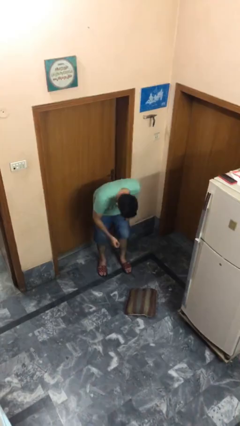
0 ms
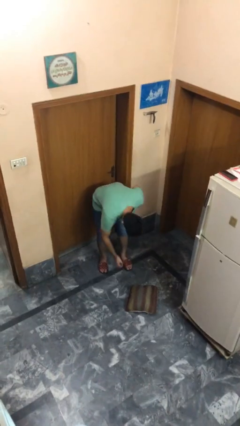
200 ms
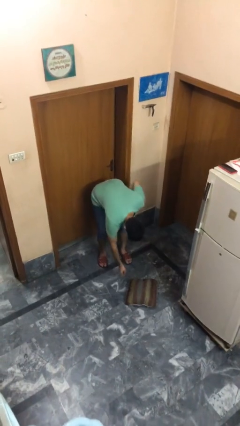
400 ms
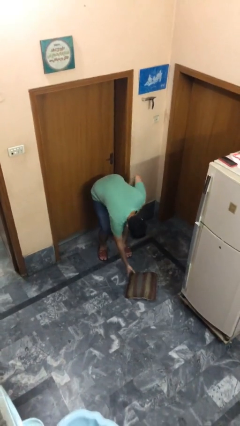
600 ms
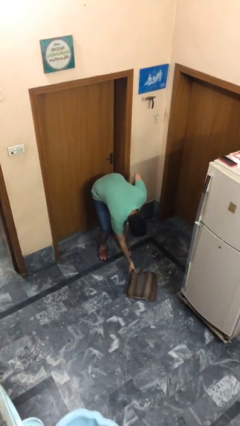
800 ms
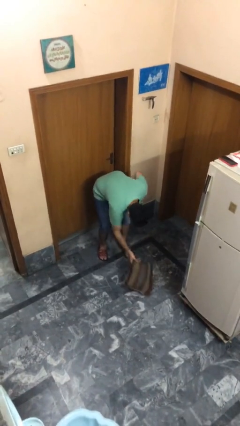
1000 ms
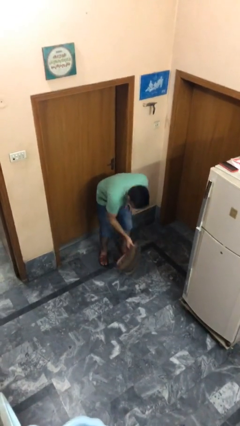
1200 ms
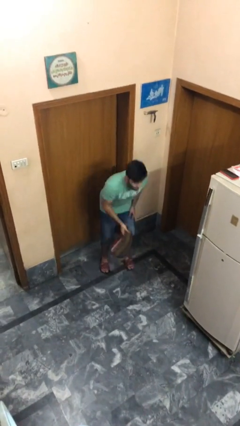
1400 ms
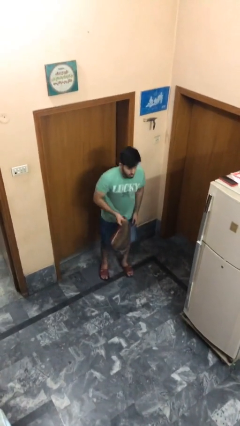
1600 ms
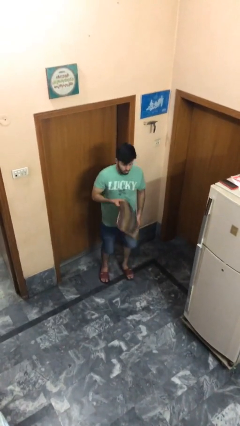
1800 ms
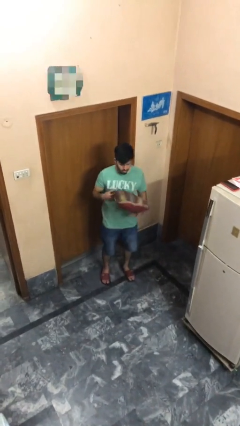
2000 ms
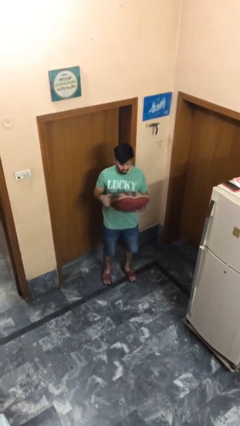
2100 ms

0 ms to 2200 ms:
person picks up object from floor

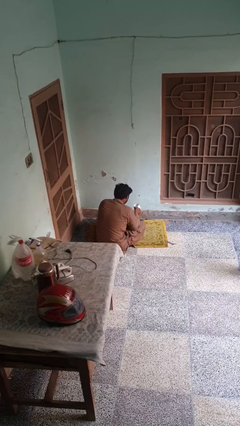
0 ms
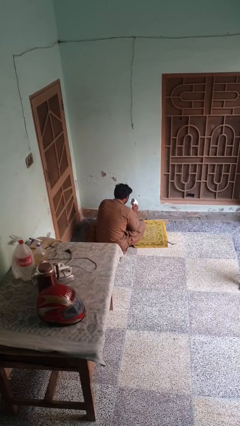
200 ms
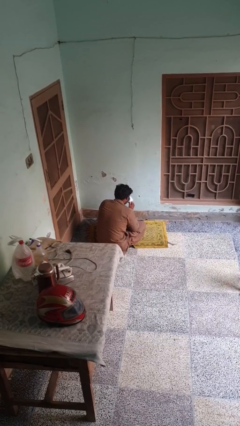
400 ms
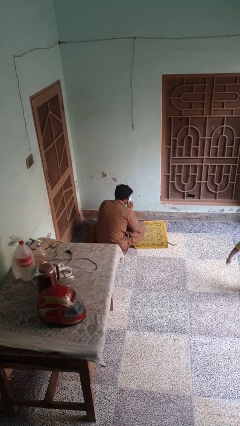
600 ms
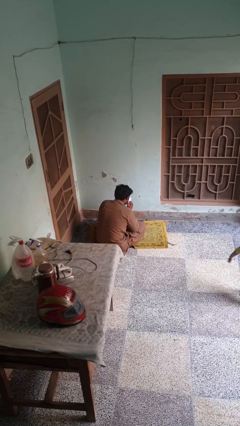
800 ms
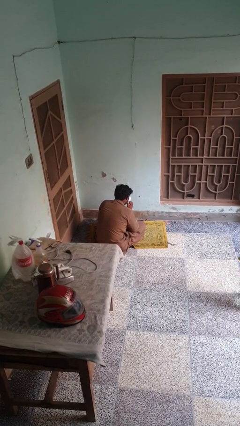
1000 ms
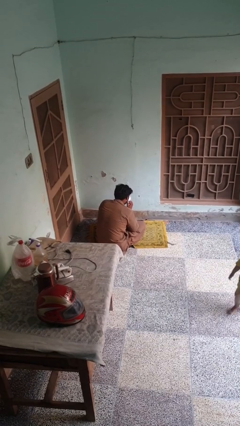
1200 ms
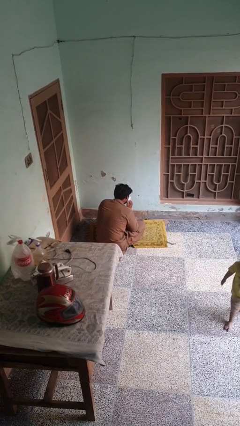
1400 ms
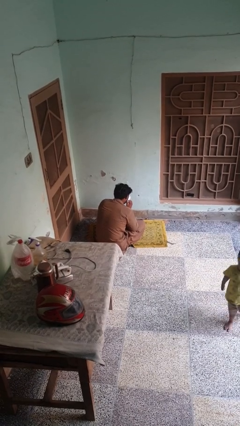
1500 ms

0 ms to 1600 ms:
person drinks from mug

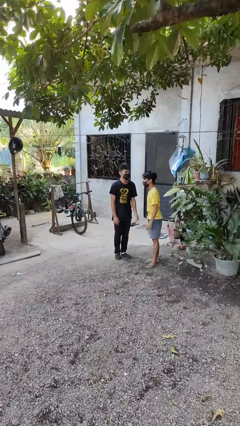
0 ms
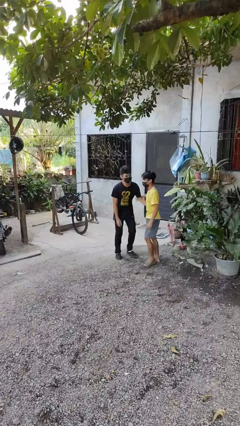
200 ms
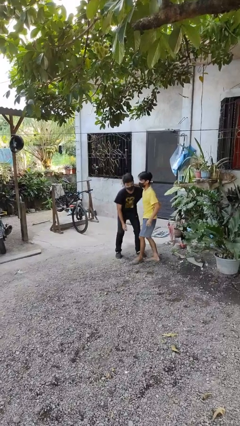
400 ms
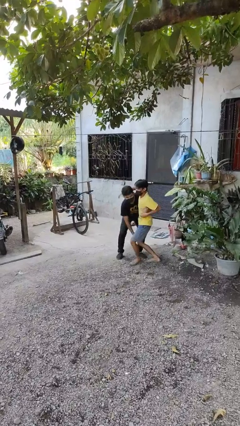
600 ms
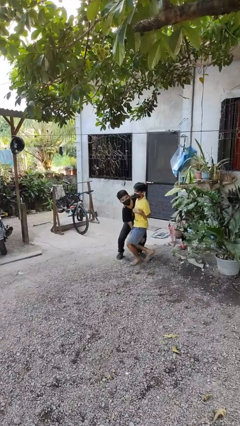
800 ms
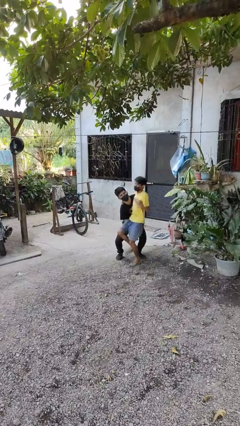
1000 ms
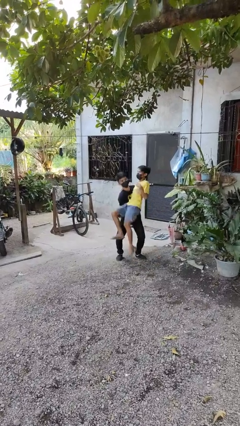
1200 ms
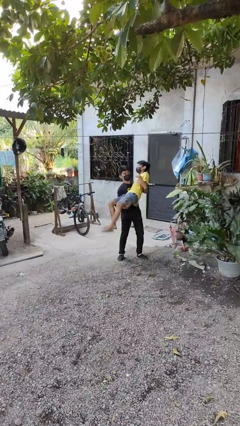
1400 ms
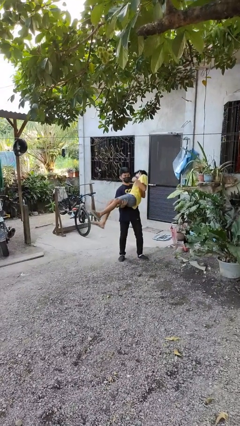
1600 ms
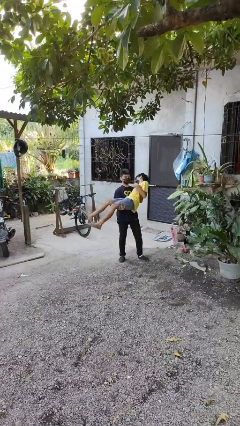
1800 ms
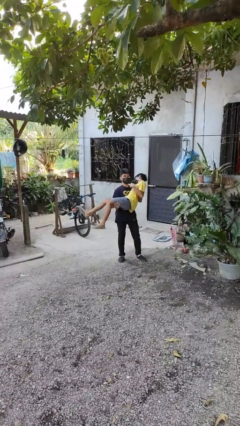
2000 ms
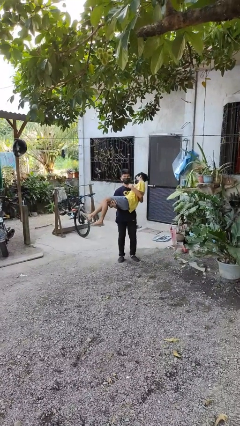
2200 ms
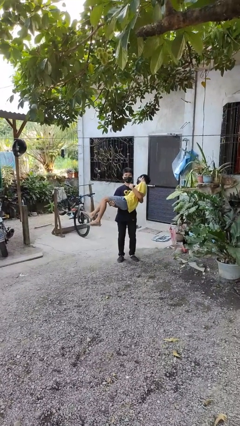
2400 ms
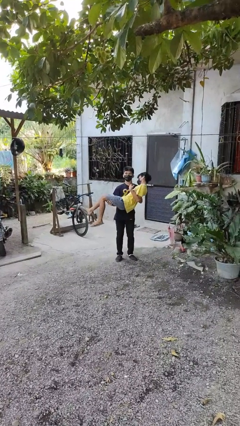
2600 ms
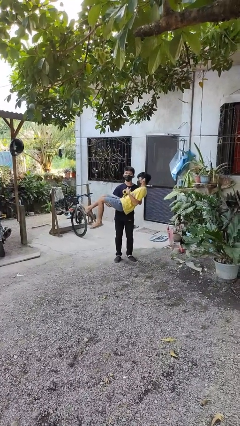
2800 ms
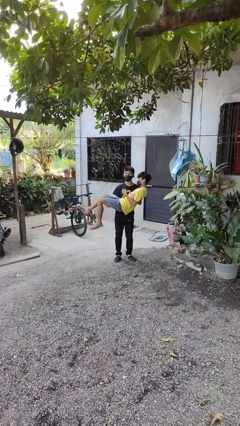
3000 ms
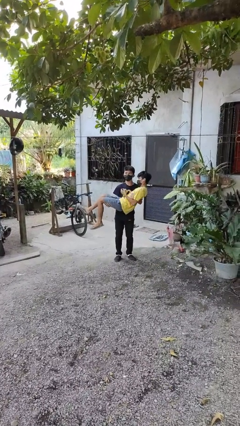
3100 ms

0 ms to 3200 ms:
person picks up person

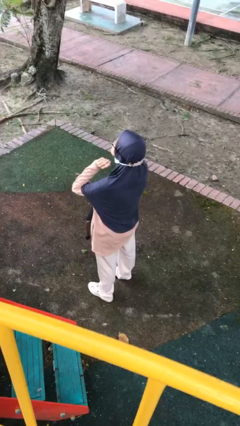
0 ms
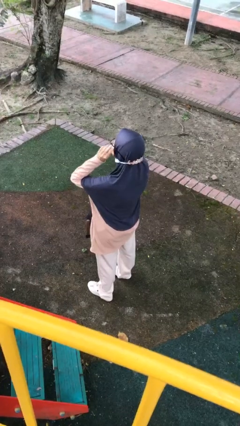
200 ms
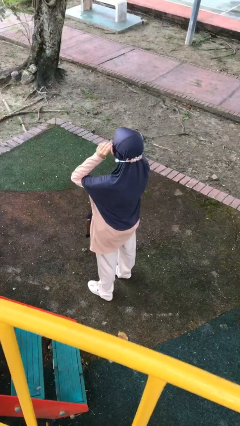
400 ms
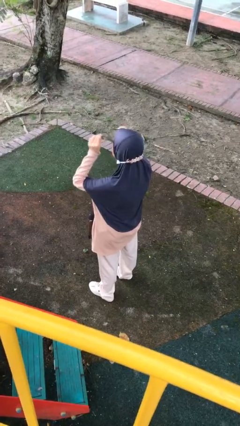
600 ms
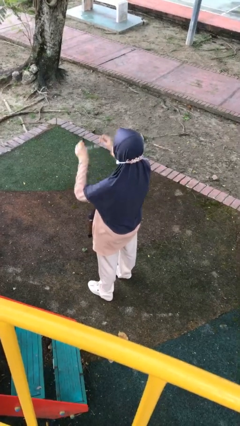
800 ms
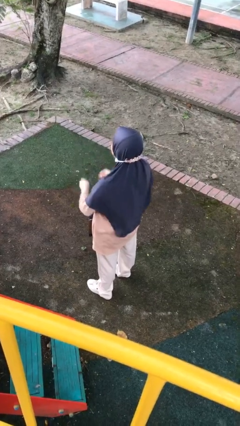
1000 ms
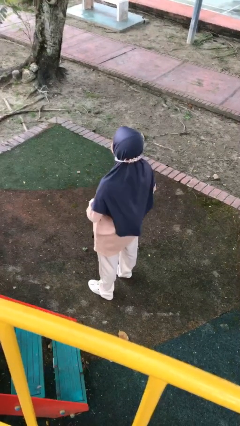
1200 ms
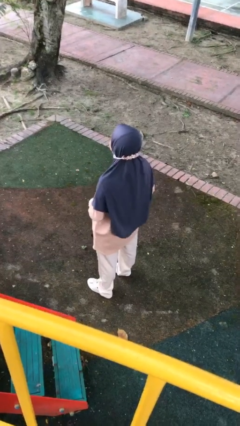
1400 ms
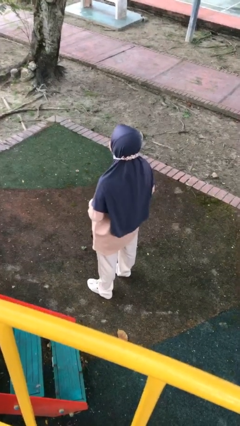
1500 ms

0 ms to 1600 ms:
person takes off glasses

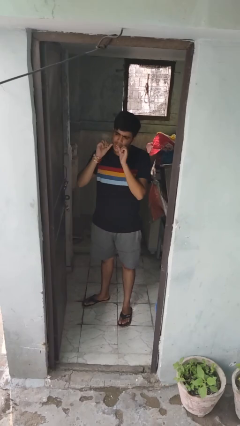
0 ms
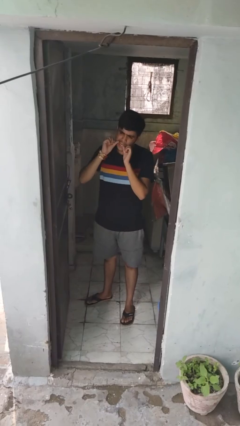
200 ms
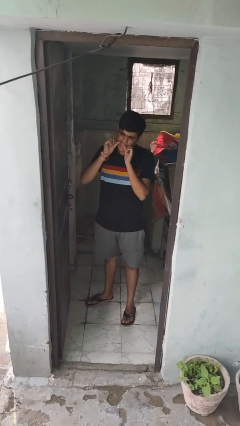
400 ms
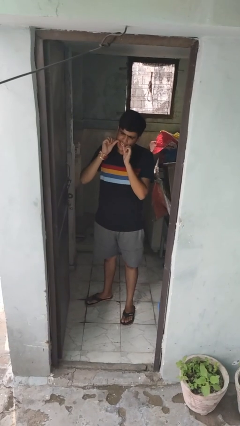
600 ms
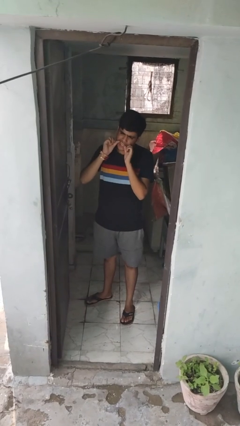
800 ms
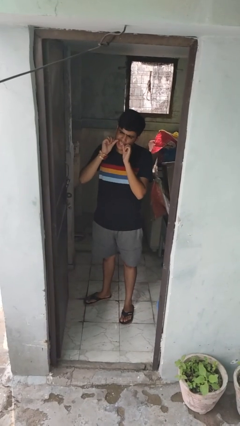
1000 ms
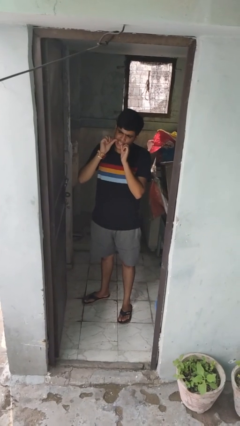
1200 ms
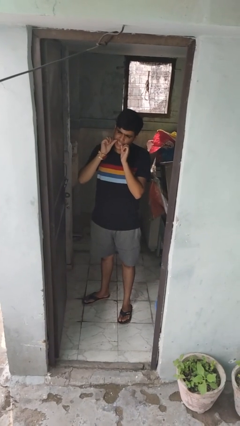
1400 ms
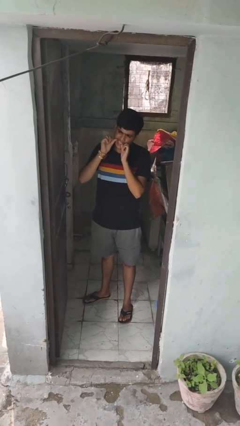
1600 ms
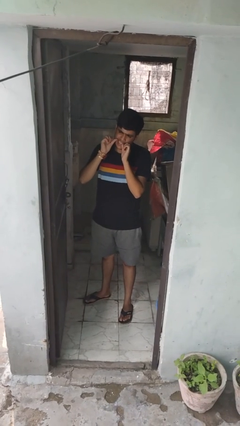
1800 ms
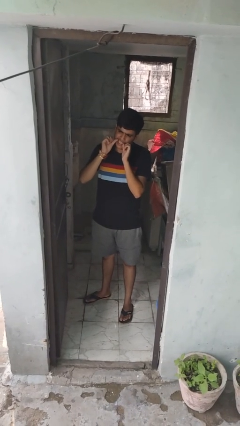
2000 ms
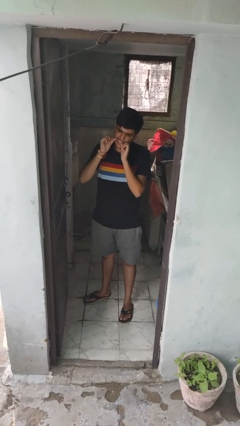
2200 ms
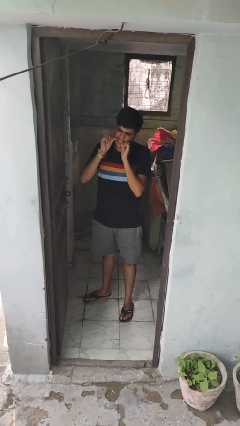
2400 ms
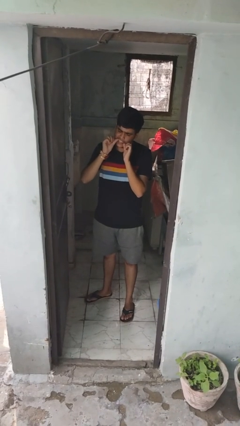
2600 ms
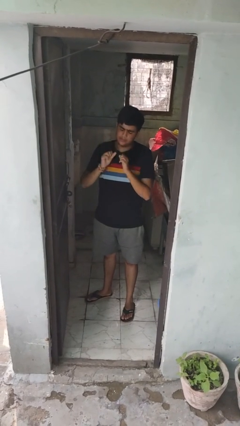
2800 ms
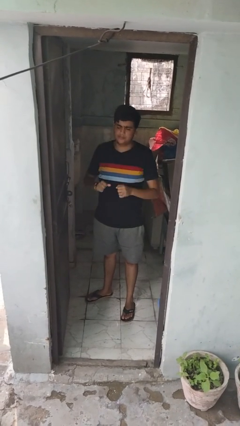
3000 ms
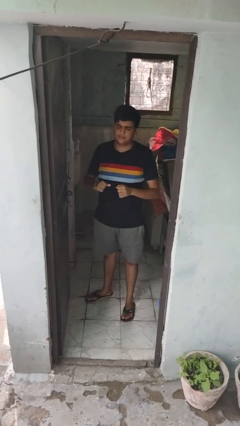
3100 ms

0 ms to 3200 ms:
person flosses

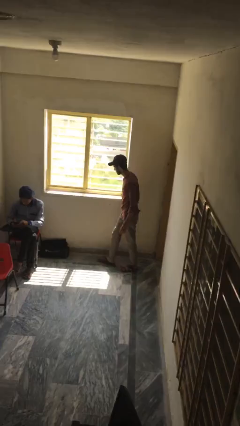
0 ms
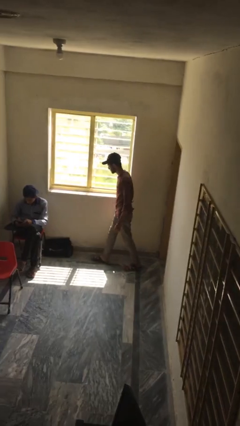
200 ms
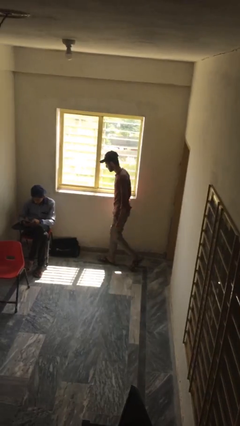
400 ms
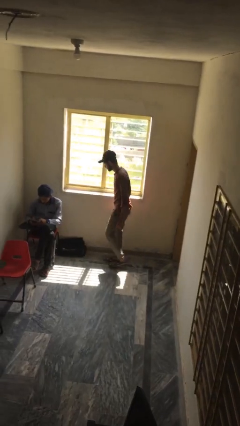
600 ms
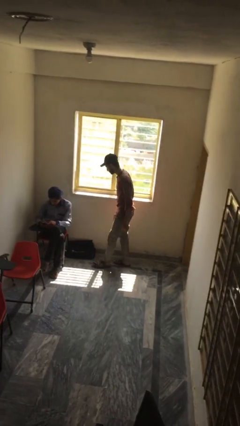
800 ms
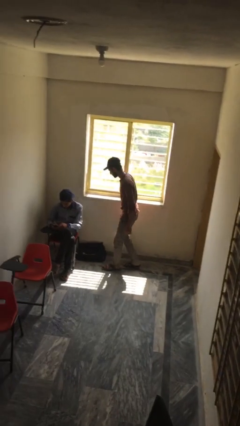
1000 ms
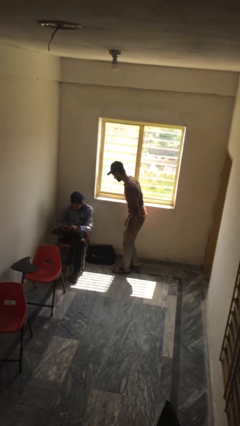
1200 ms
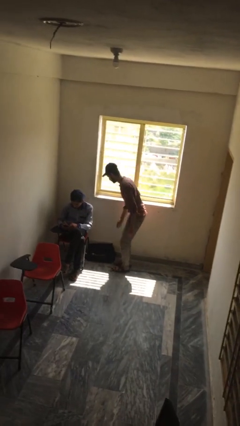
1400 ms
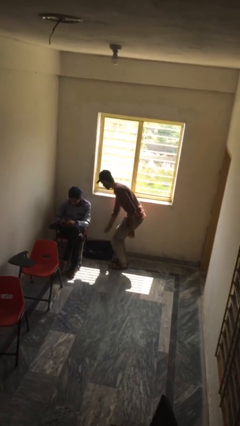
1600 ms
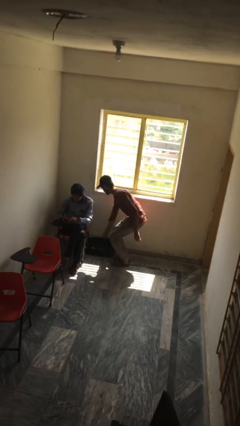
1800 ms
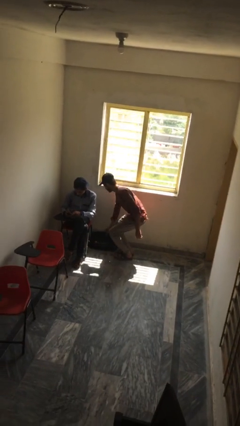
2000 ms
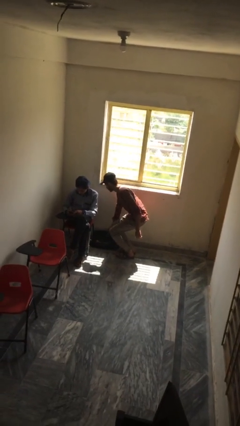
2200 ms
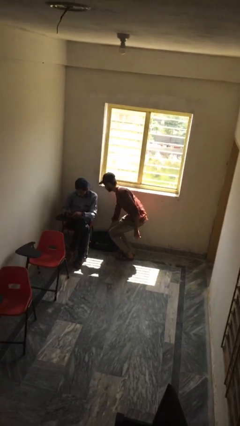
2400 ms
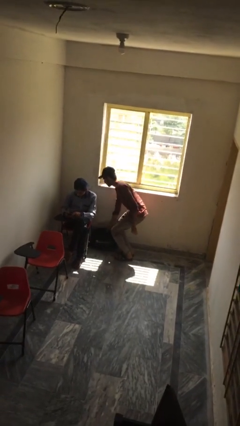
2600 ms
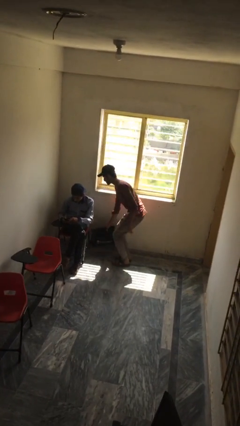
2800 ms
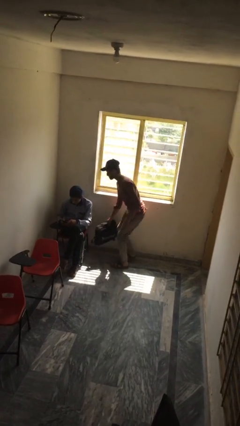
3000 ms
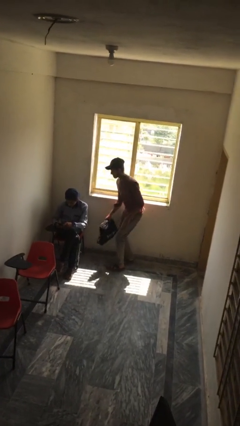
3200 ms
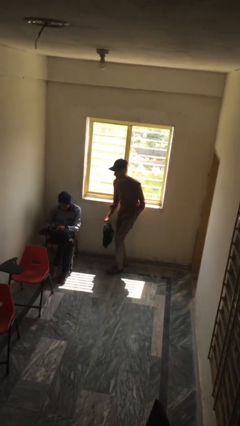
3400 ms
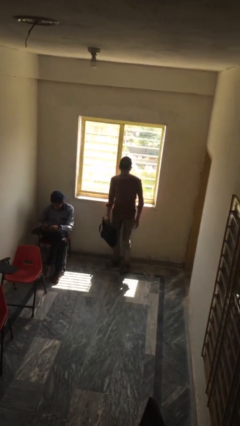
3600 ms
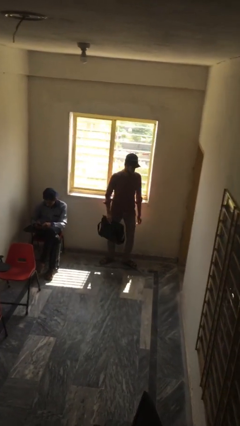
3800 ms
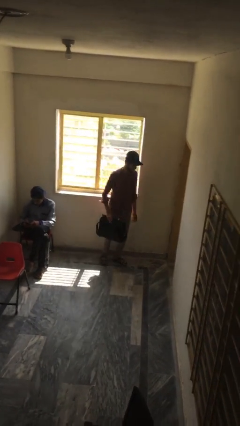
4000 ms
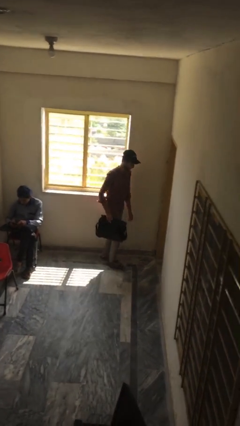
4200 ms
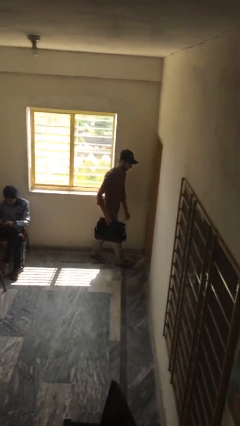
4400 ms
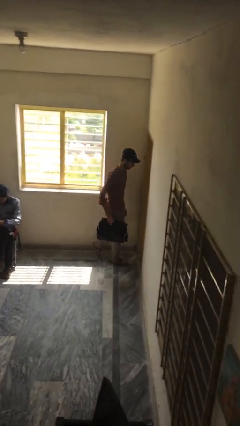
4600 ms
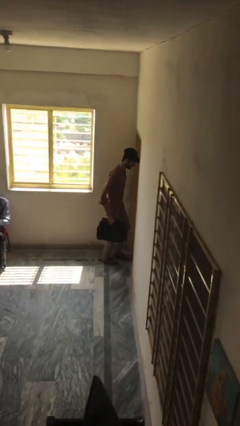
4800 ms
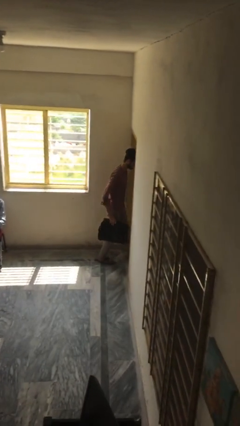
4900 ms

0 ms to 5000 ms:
person steals object from person

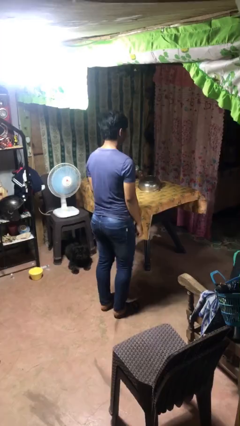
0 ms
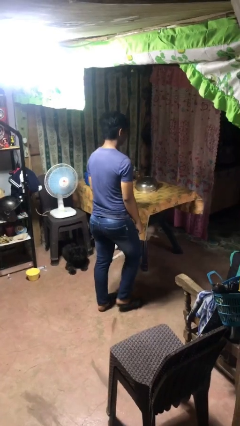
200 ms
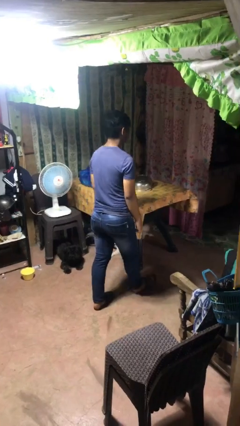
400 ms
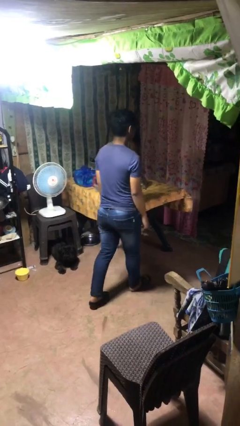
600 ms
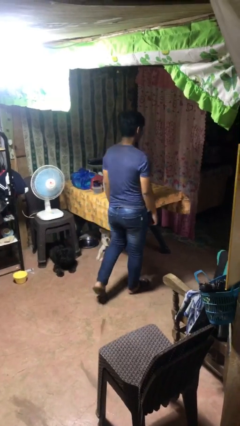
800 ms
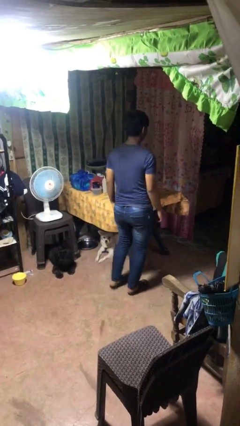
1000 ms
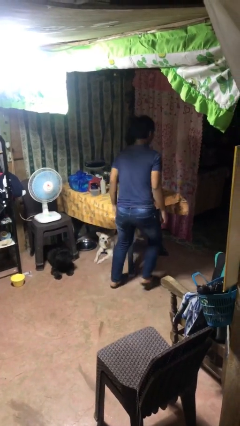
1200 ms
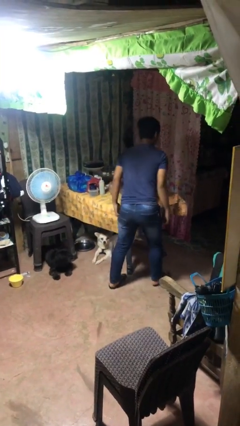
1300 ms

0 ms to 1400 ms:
person bumps into table
